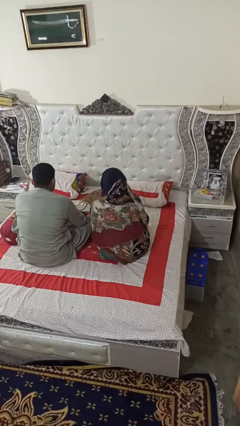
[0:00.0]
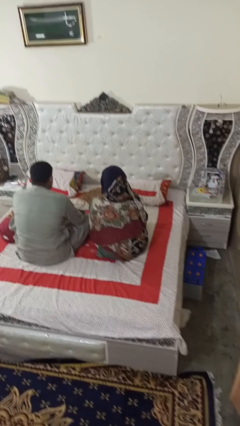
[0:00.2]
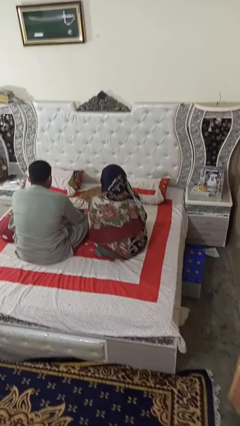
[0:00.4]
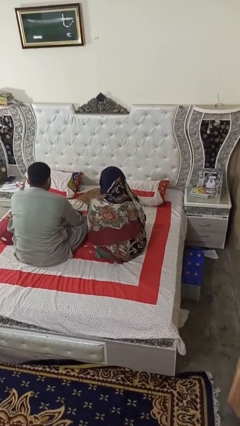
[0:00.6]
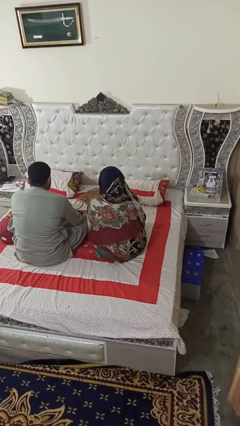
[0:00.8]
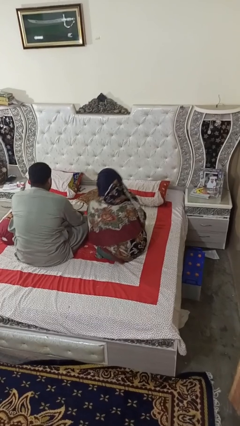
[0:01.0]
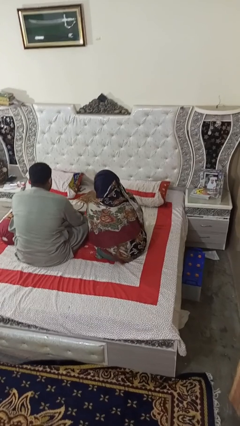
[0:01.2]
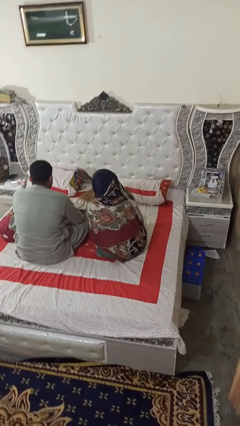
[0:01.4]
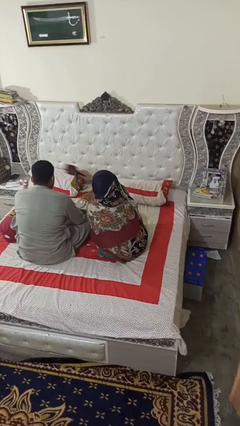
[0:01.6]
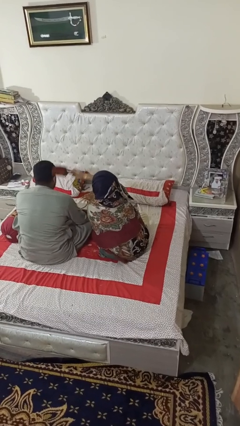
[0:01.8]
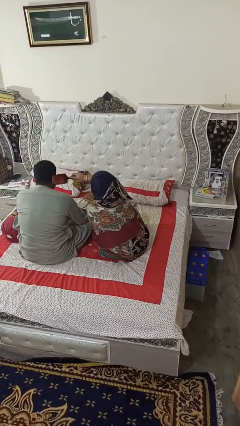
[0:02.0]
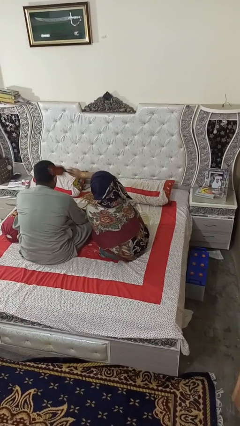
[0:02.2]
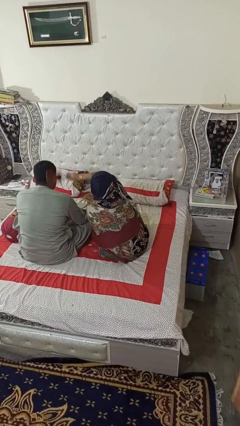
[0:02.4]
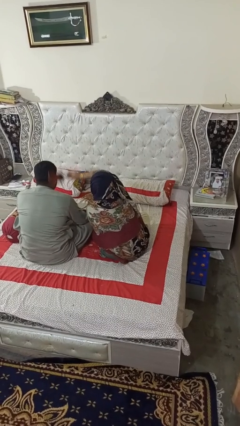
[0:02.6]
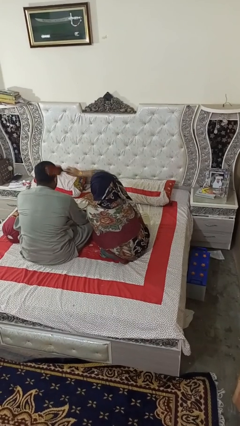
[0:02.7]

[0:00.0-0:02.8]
person brushes hair of person

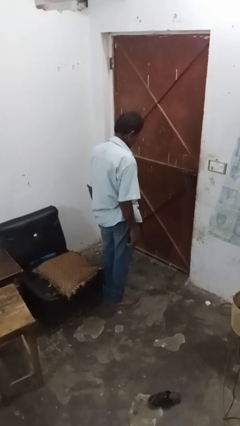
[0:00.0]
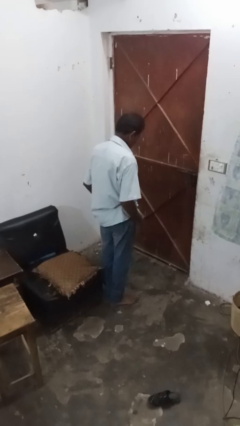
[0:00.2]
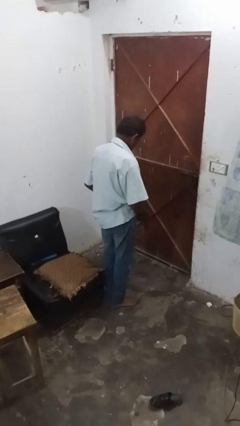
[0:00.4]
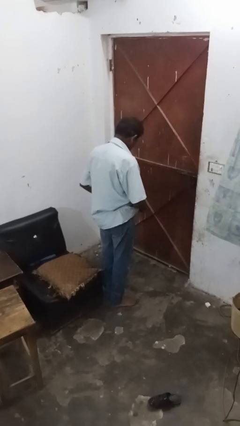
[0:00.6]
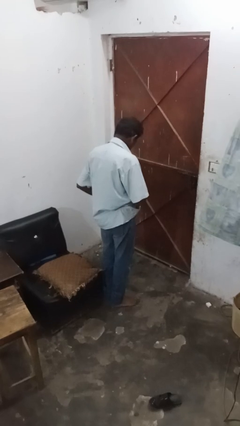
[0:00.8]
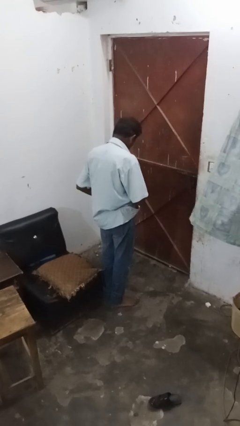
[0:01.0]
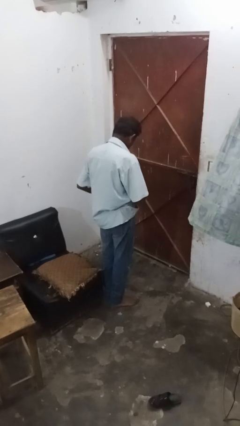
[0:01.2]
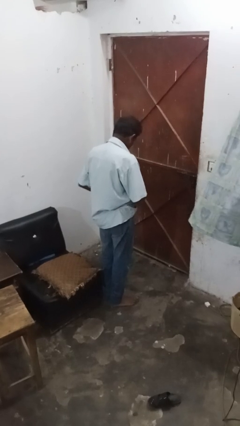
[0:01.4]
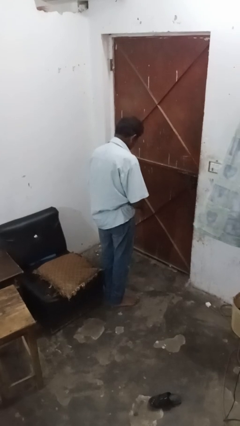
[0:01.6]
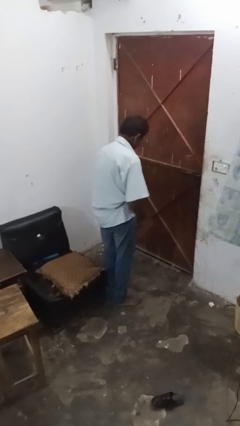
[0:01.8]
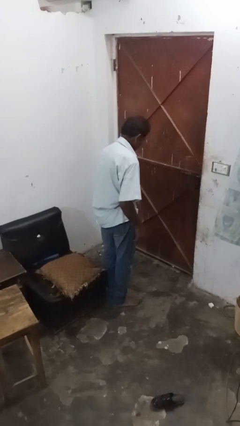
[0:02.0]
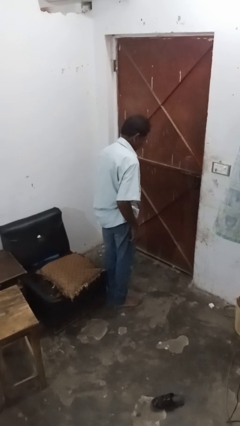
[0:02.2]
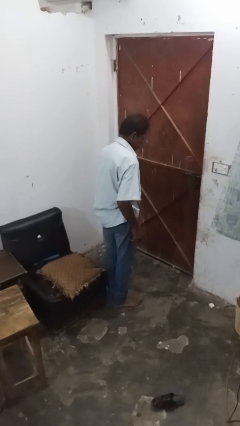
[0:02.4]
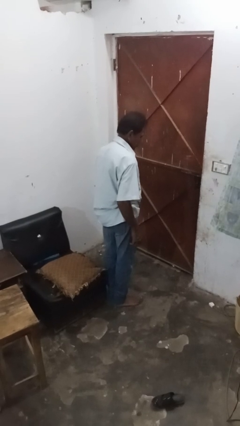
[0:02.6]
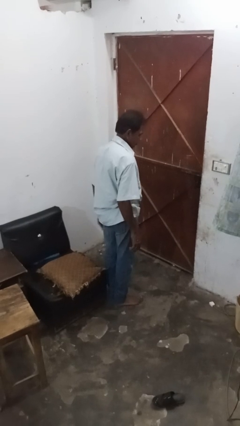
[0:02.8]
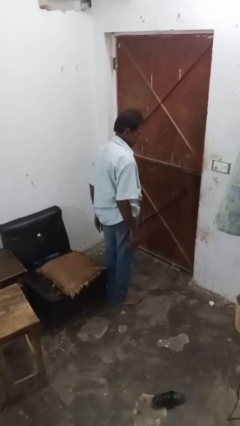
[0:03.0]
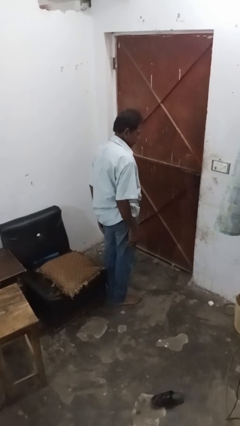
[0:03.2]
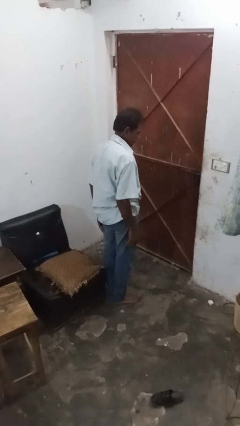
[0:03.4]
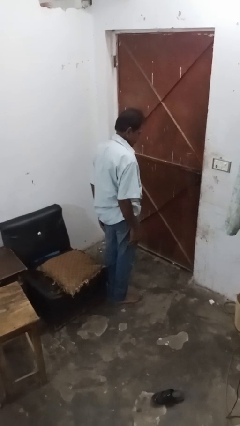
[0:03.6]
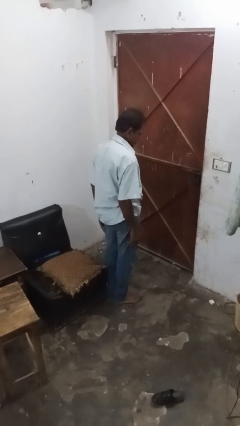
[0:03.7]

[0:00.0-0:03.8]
person puts on belt

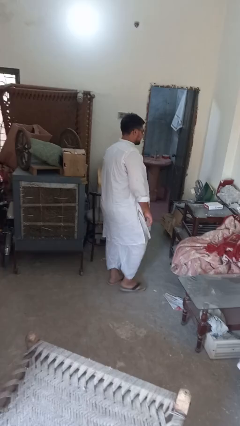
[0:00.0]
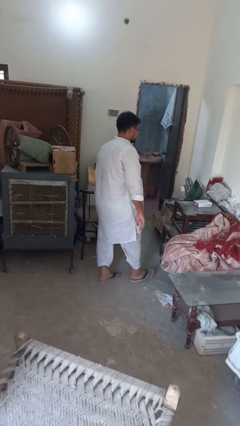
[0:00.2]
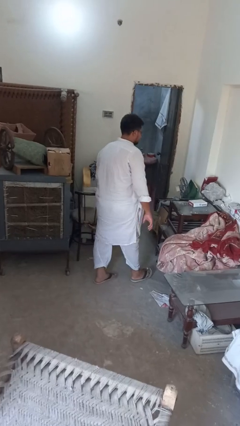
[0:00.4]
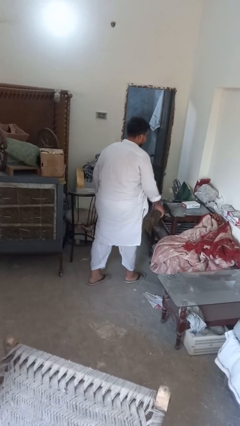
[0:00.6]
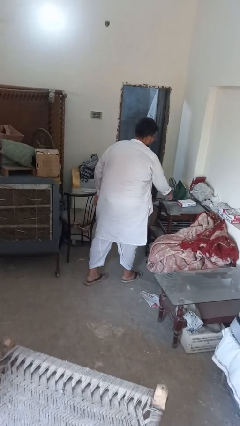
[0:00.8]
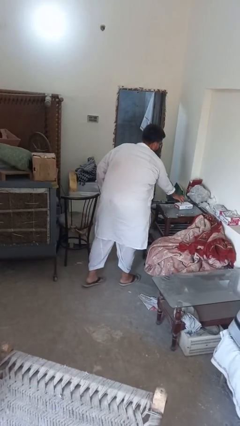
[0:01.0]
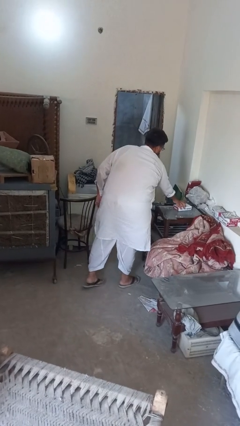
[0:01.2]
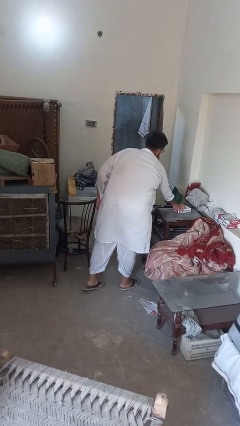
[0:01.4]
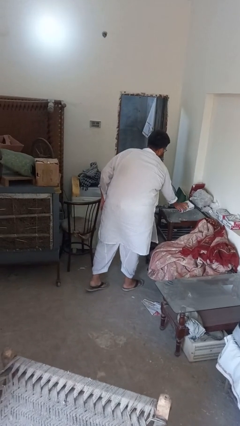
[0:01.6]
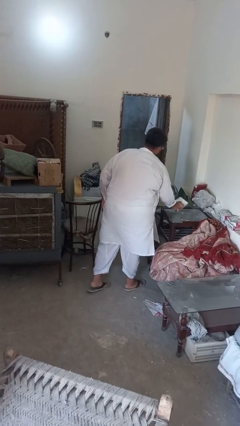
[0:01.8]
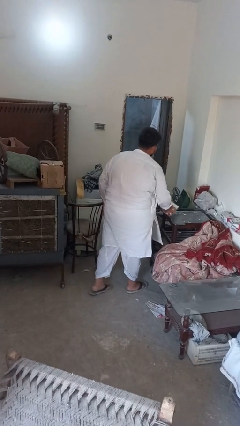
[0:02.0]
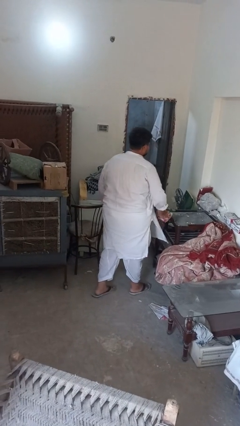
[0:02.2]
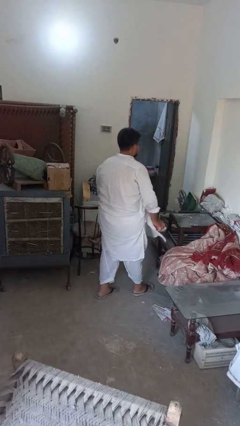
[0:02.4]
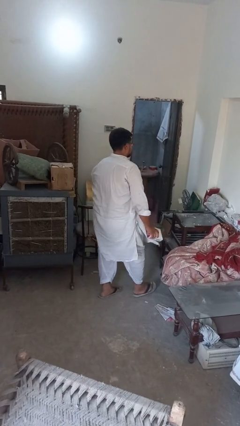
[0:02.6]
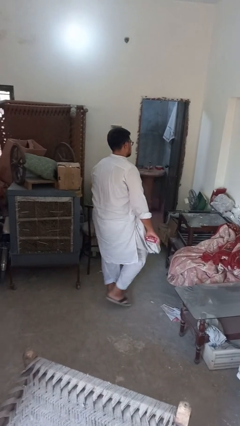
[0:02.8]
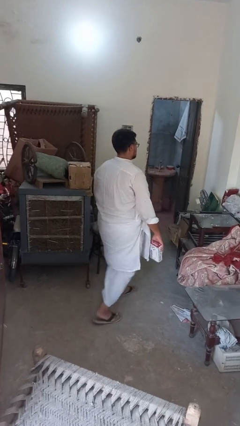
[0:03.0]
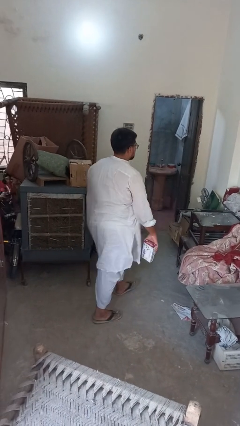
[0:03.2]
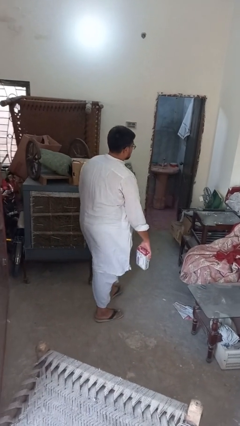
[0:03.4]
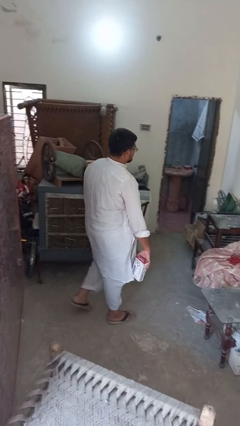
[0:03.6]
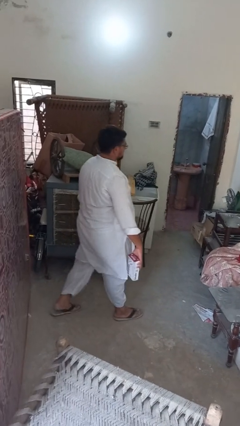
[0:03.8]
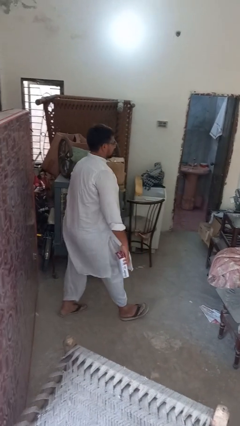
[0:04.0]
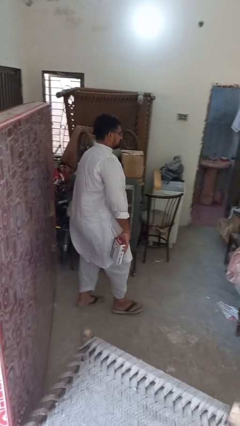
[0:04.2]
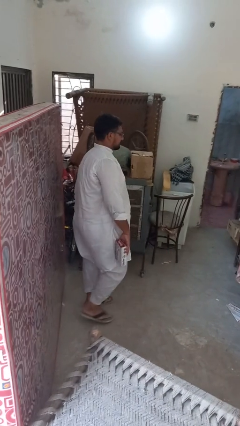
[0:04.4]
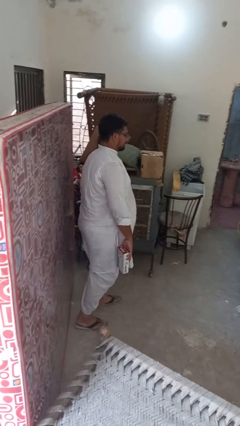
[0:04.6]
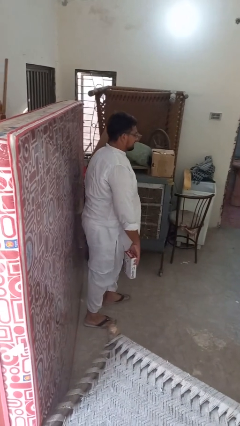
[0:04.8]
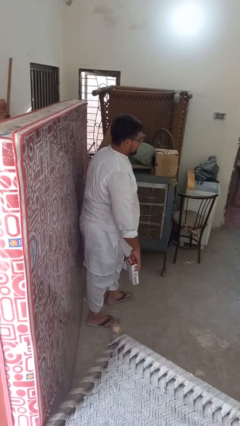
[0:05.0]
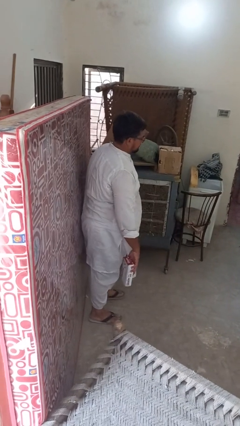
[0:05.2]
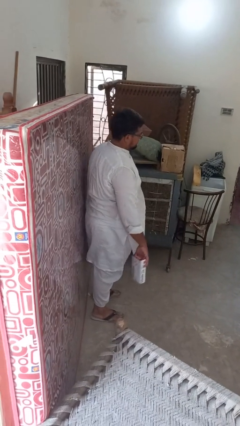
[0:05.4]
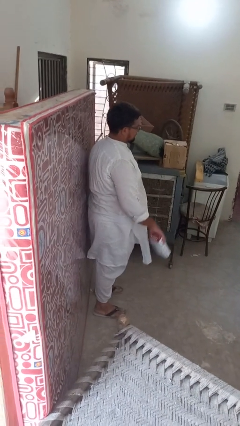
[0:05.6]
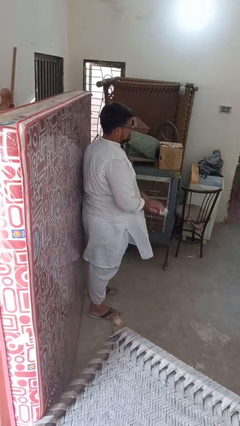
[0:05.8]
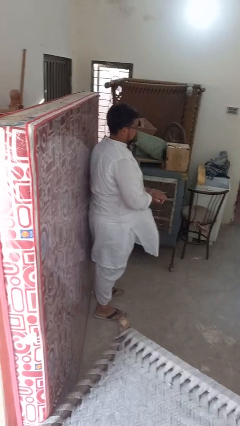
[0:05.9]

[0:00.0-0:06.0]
person picks up object from table

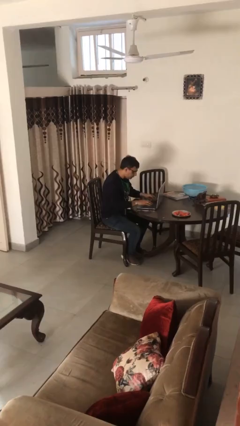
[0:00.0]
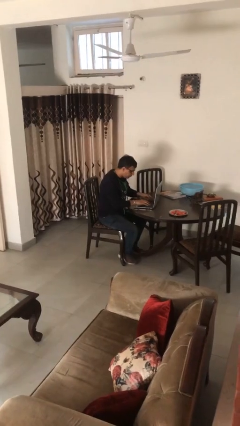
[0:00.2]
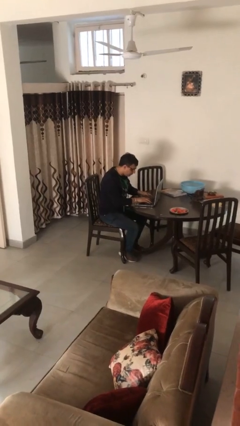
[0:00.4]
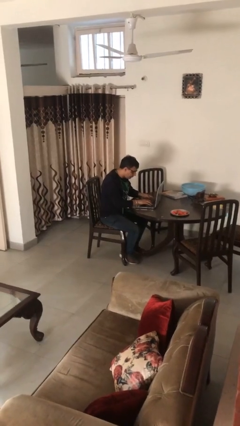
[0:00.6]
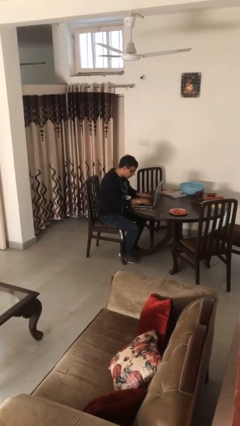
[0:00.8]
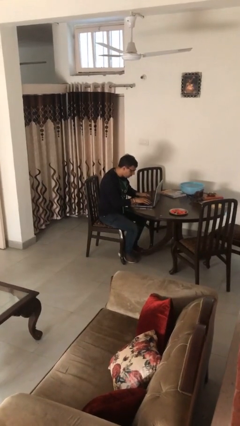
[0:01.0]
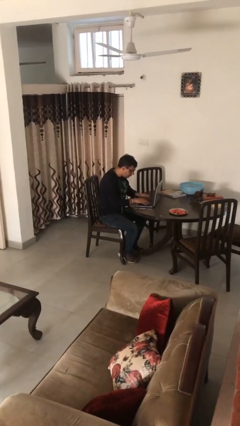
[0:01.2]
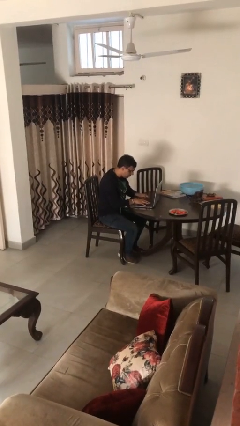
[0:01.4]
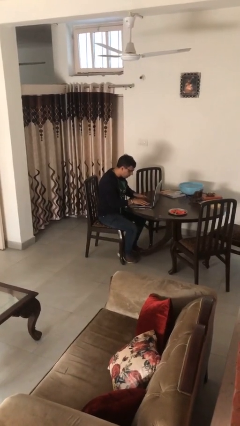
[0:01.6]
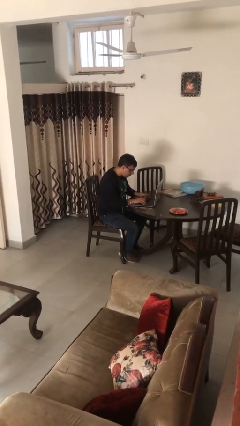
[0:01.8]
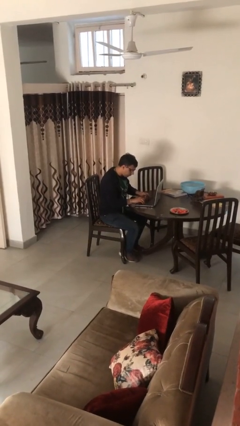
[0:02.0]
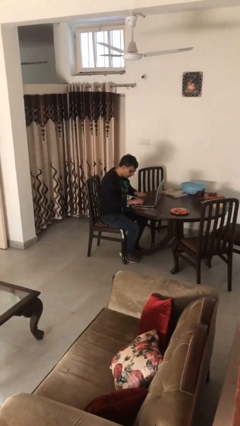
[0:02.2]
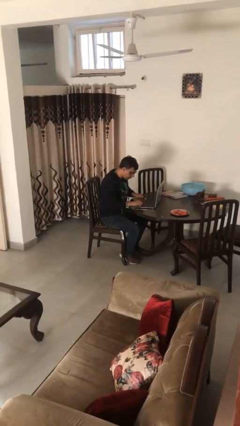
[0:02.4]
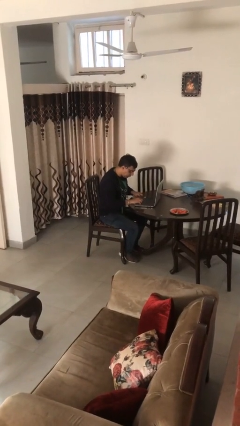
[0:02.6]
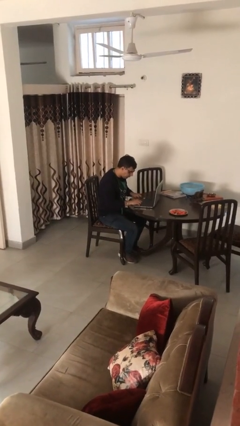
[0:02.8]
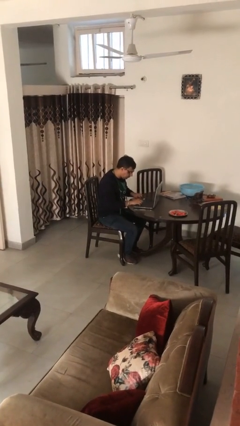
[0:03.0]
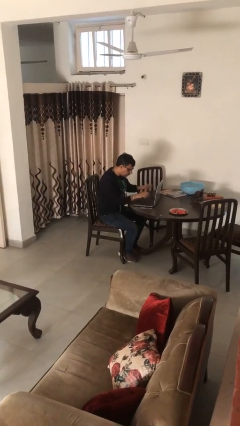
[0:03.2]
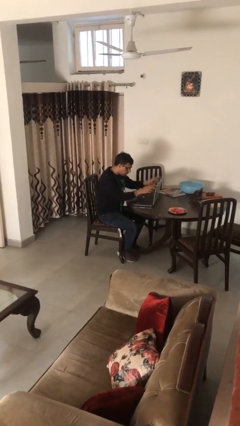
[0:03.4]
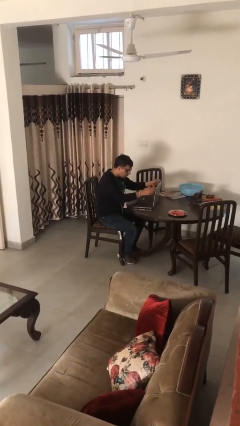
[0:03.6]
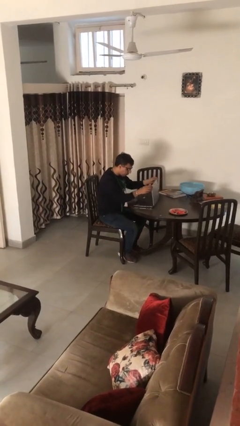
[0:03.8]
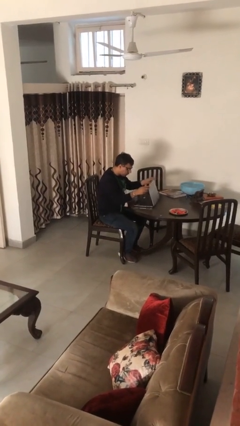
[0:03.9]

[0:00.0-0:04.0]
person interacts with laptop

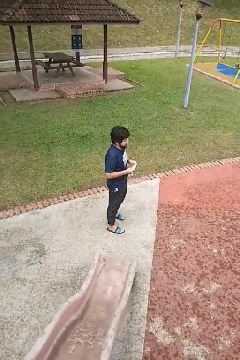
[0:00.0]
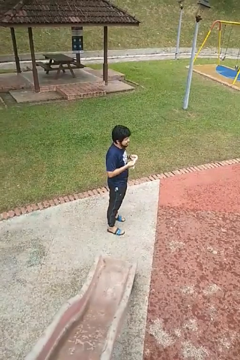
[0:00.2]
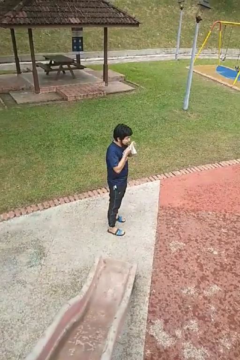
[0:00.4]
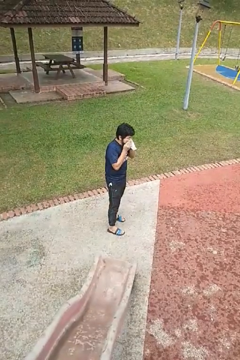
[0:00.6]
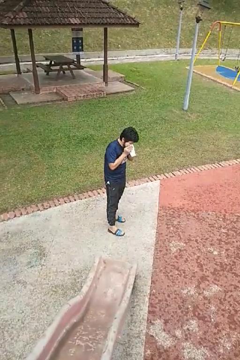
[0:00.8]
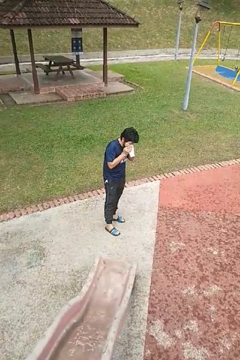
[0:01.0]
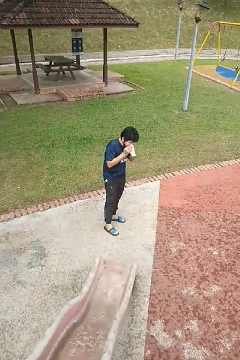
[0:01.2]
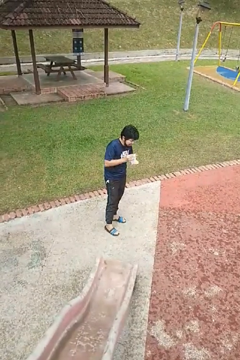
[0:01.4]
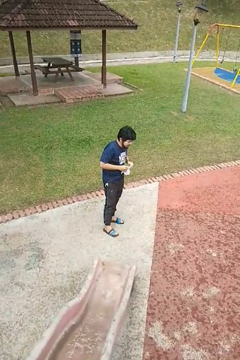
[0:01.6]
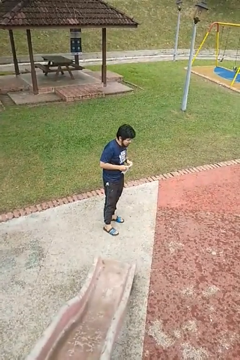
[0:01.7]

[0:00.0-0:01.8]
person blows nose
